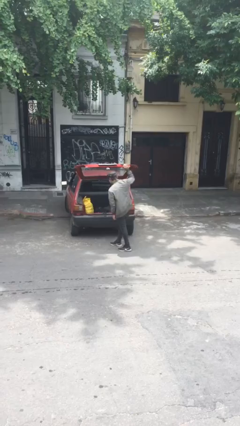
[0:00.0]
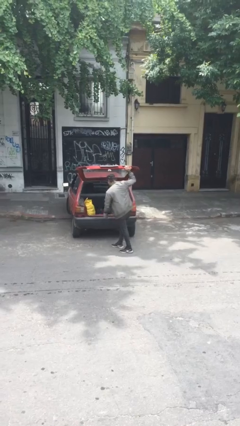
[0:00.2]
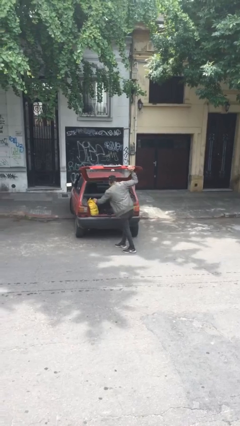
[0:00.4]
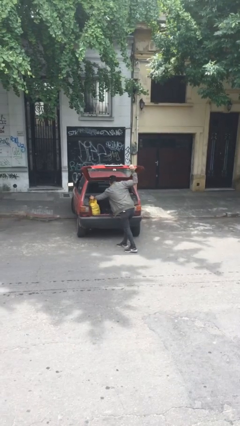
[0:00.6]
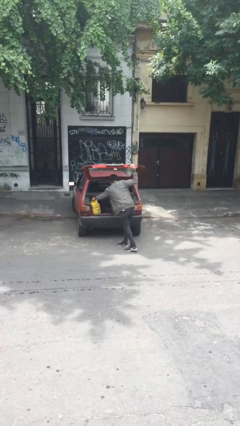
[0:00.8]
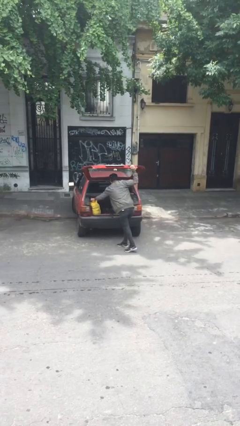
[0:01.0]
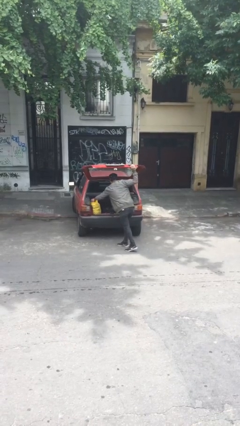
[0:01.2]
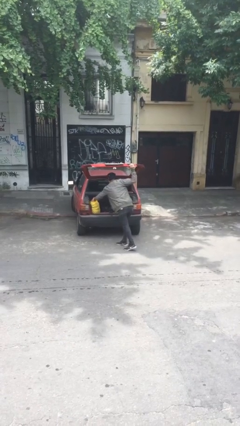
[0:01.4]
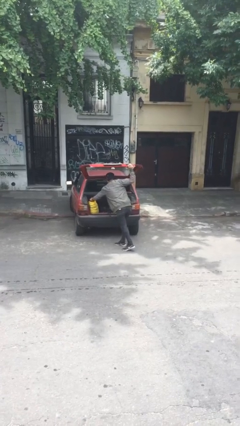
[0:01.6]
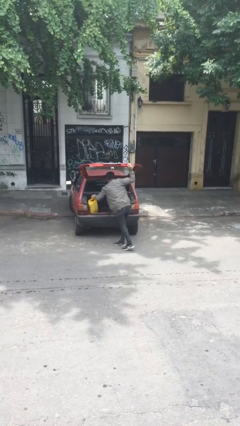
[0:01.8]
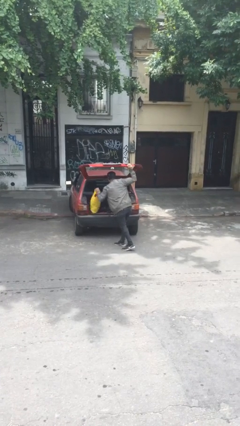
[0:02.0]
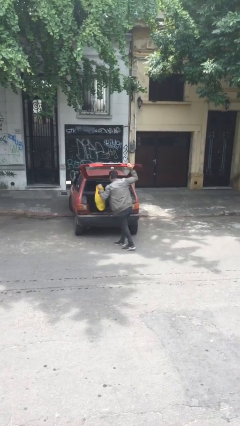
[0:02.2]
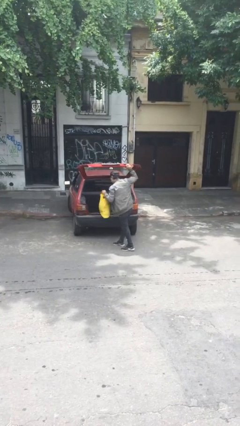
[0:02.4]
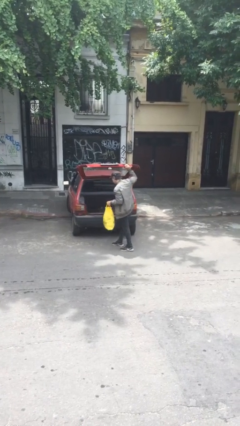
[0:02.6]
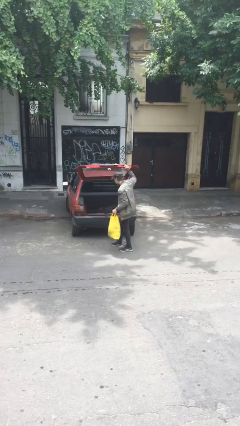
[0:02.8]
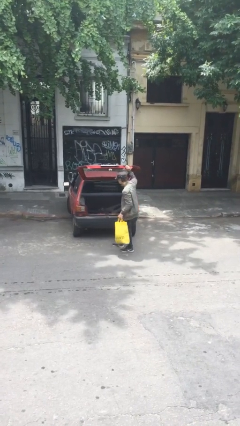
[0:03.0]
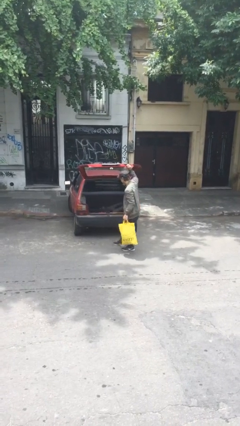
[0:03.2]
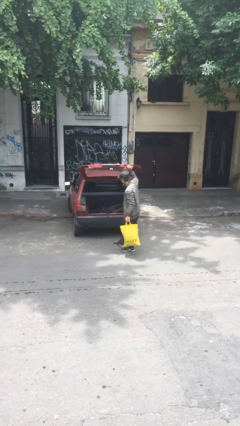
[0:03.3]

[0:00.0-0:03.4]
person unloads car

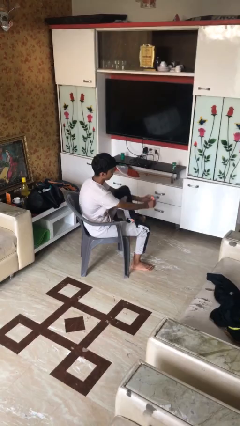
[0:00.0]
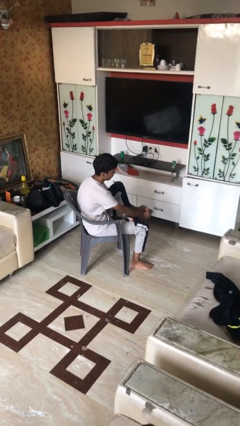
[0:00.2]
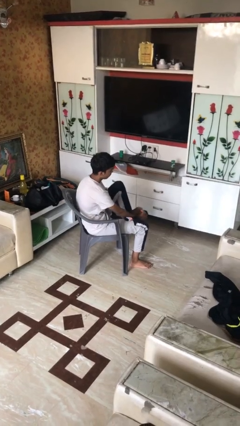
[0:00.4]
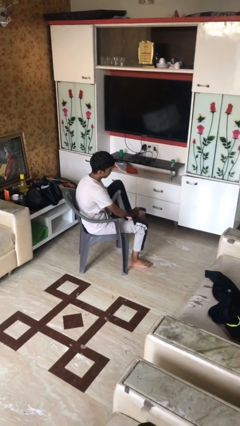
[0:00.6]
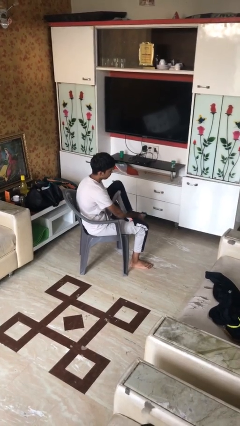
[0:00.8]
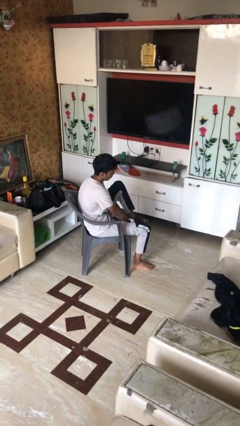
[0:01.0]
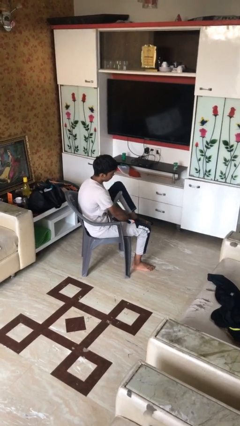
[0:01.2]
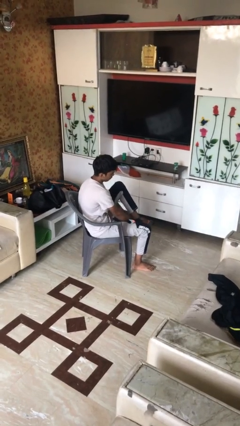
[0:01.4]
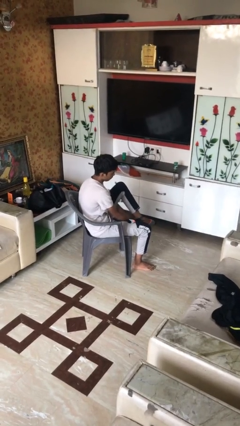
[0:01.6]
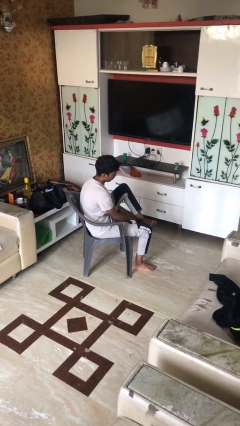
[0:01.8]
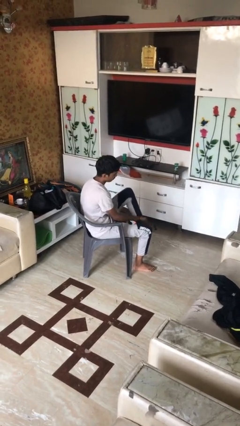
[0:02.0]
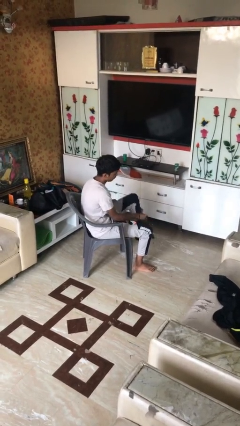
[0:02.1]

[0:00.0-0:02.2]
person puts on socks

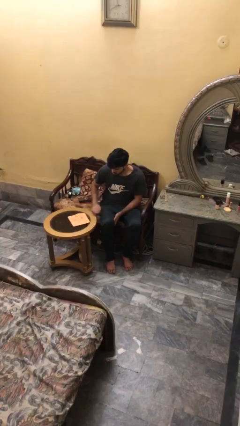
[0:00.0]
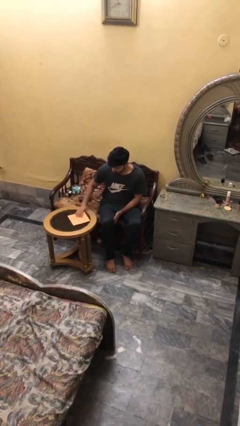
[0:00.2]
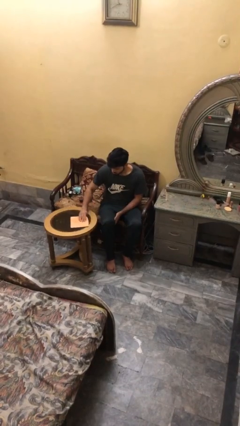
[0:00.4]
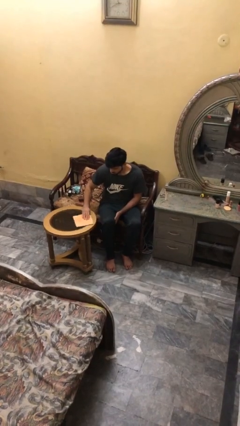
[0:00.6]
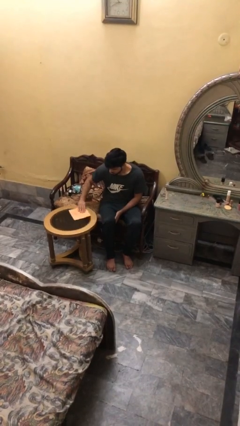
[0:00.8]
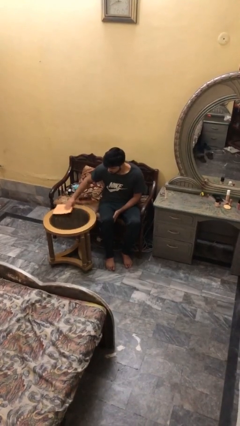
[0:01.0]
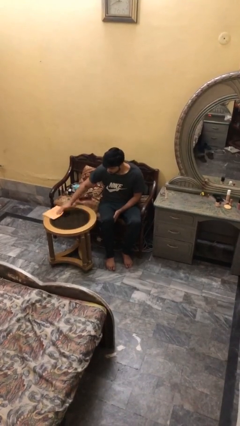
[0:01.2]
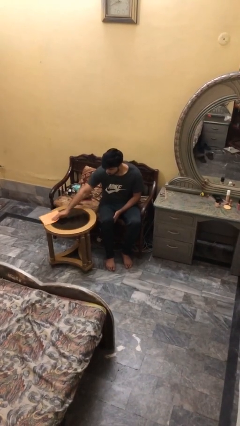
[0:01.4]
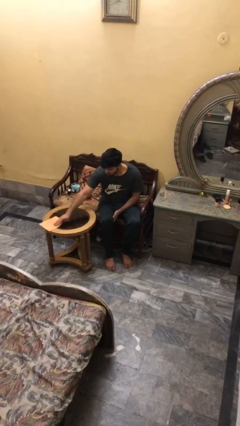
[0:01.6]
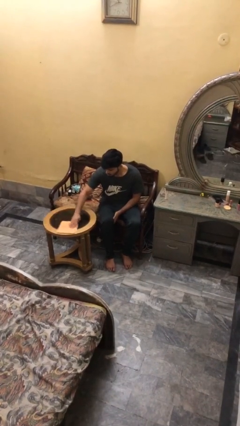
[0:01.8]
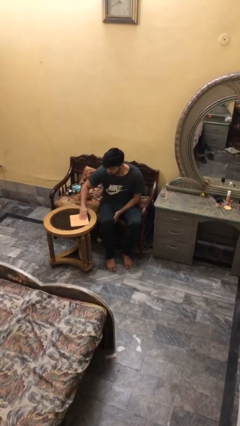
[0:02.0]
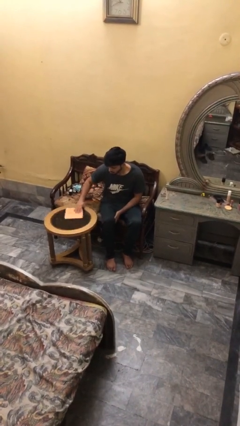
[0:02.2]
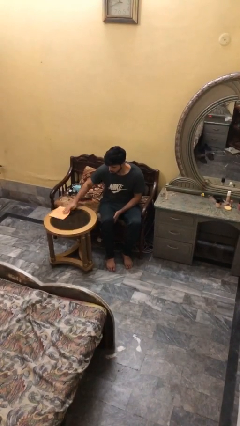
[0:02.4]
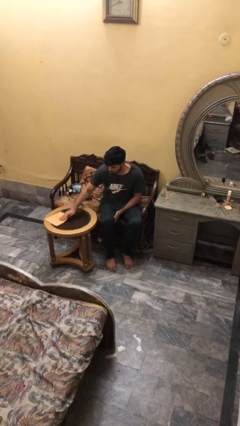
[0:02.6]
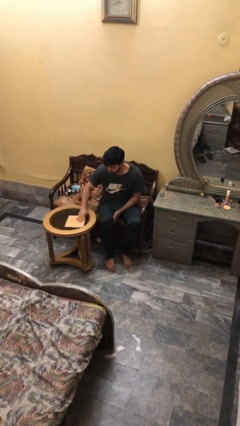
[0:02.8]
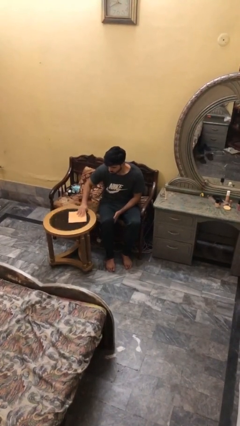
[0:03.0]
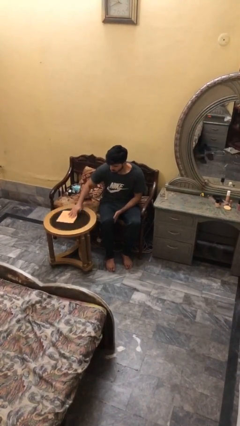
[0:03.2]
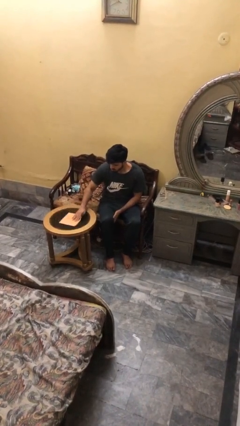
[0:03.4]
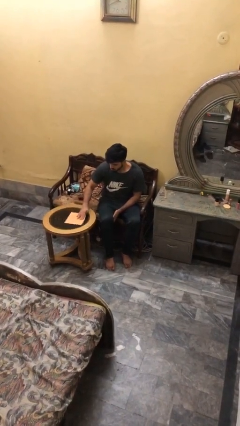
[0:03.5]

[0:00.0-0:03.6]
person cleans table with rag

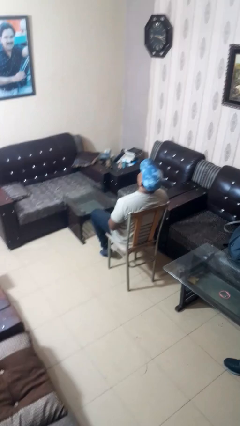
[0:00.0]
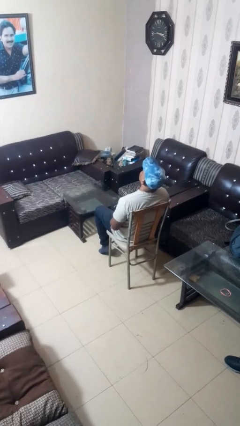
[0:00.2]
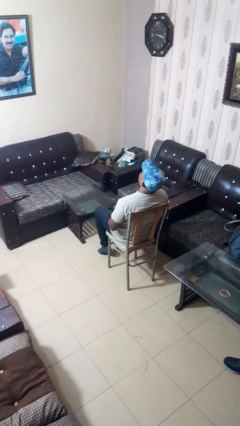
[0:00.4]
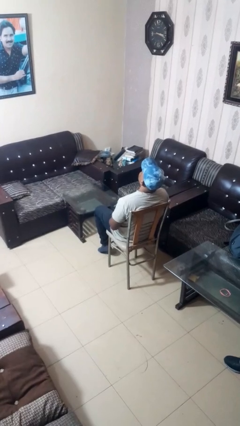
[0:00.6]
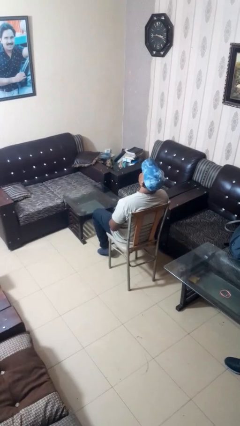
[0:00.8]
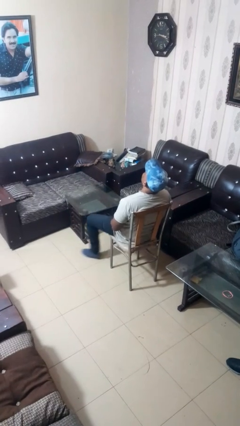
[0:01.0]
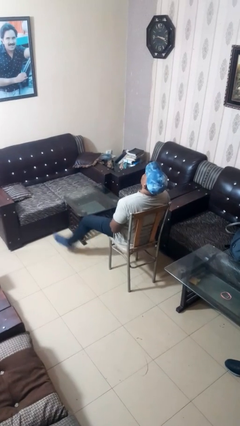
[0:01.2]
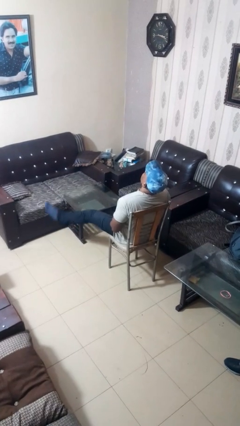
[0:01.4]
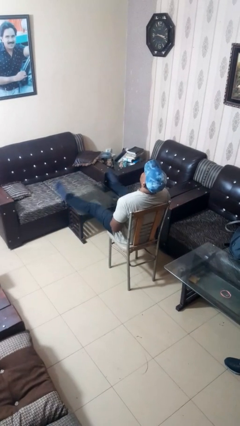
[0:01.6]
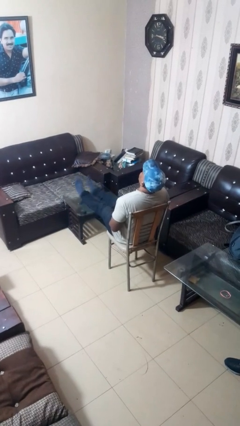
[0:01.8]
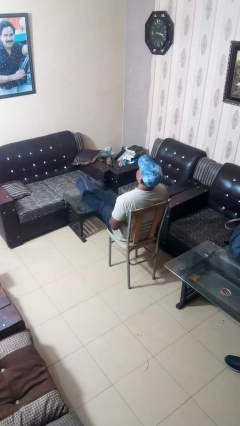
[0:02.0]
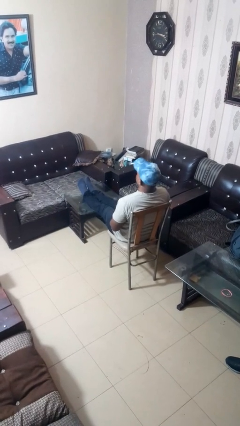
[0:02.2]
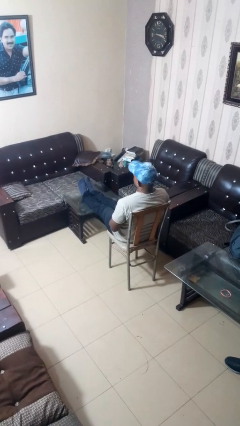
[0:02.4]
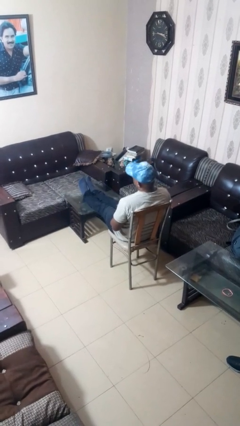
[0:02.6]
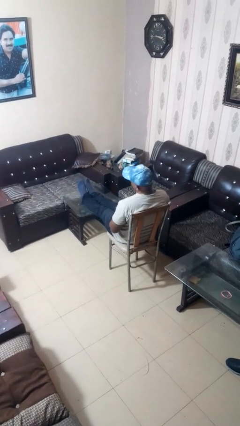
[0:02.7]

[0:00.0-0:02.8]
person puts feet up

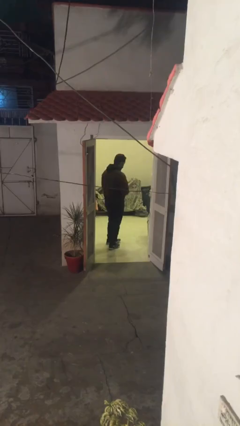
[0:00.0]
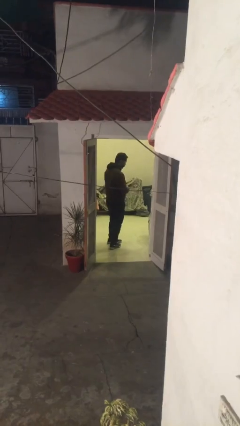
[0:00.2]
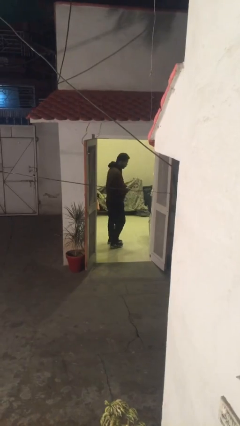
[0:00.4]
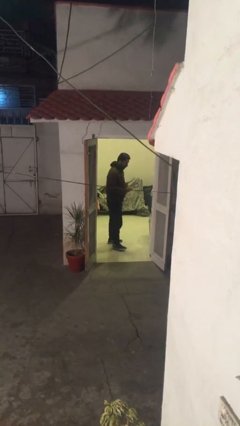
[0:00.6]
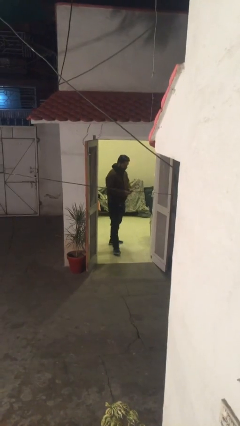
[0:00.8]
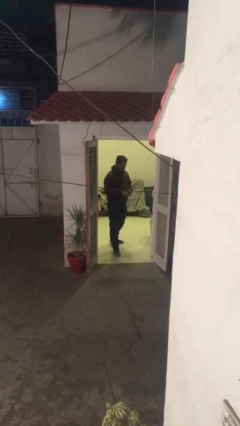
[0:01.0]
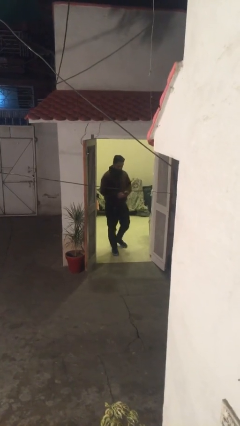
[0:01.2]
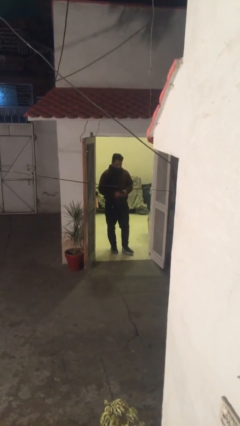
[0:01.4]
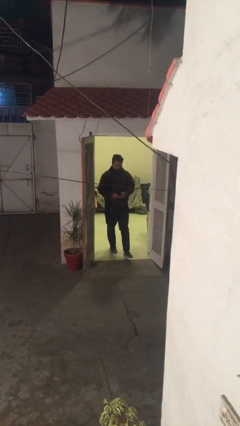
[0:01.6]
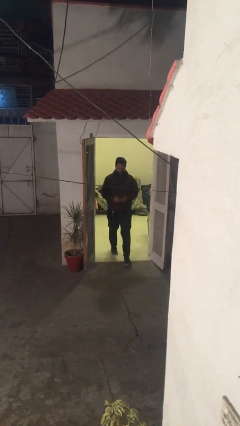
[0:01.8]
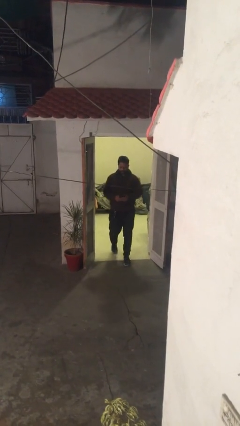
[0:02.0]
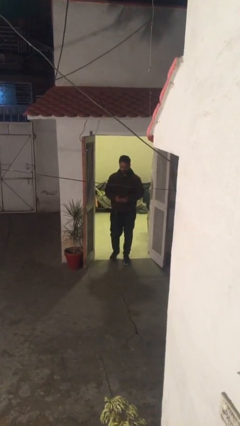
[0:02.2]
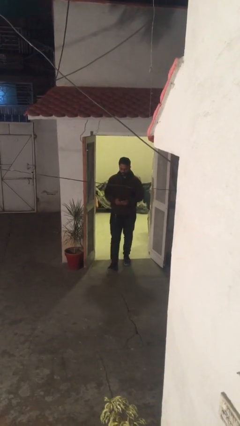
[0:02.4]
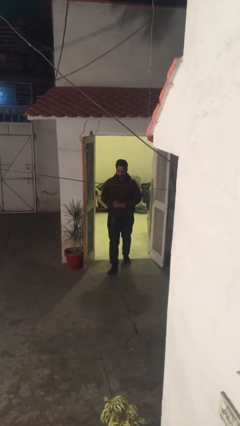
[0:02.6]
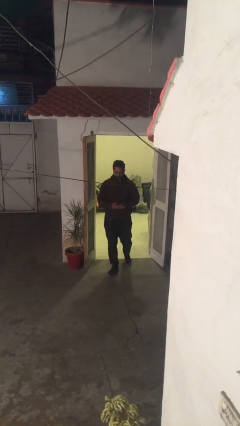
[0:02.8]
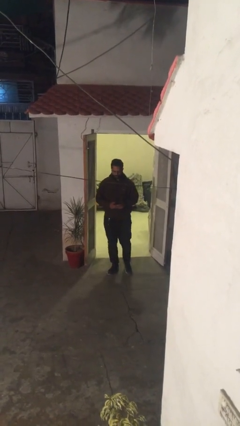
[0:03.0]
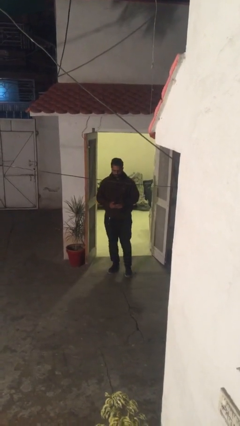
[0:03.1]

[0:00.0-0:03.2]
person enters scene through structure

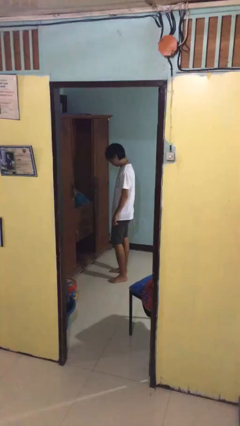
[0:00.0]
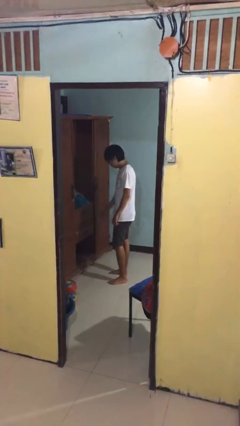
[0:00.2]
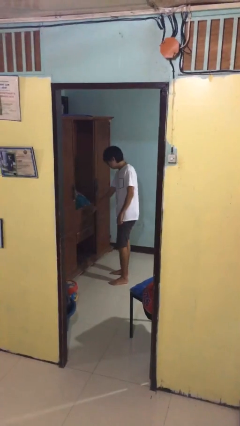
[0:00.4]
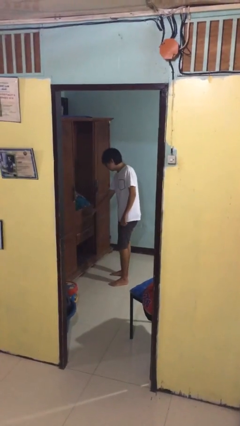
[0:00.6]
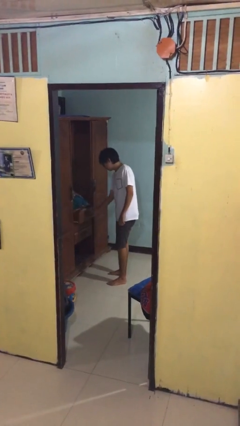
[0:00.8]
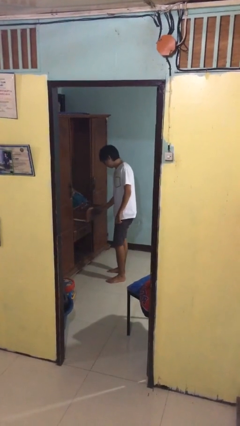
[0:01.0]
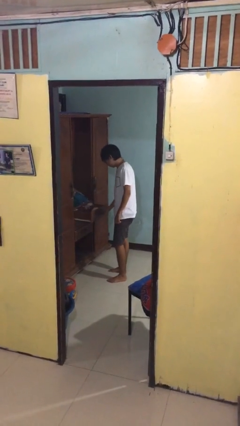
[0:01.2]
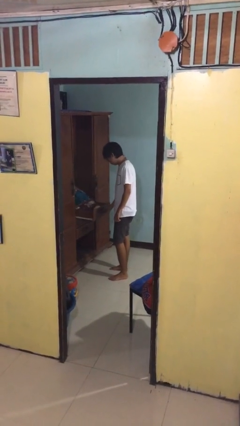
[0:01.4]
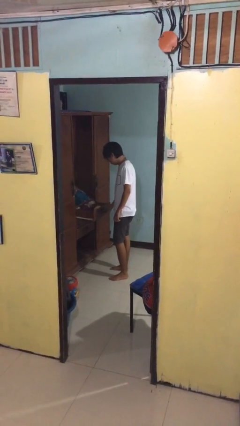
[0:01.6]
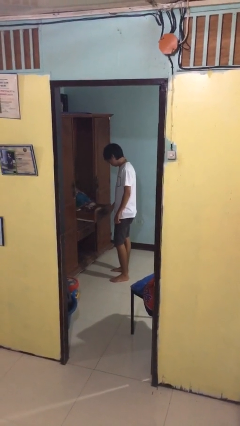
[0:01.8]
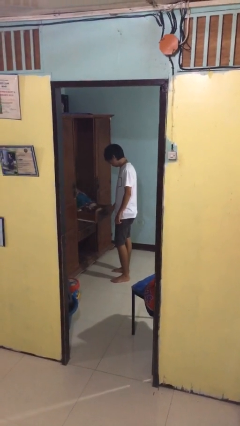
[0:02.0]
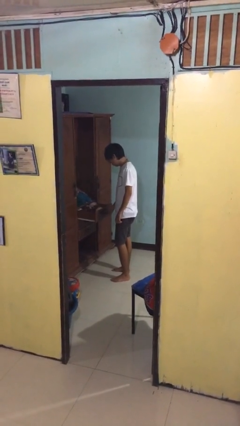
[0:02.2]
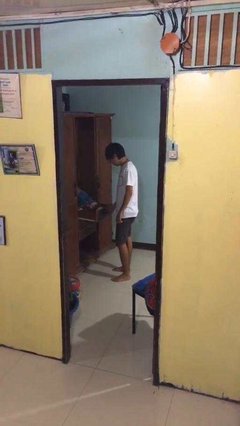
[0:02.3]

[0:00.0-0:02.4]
person opens dresser drawer
